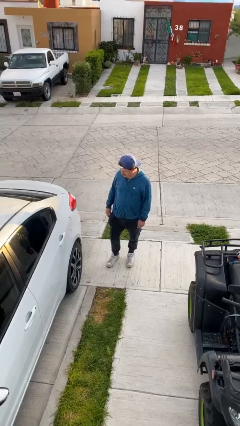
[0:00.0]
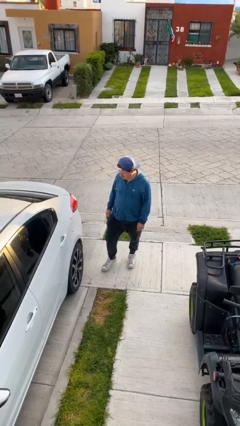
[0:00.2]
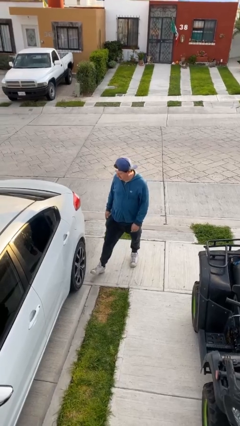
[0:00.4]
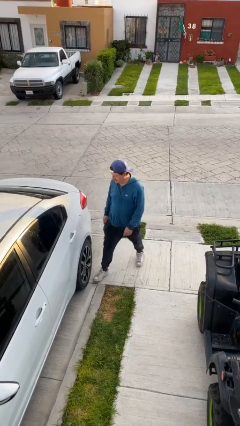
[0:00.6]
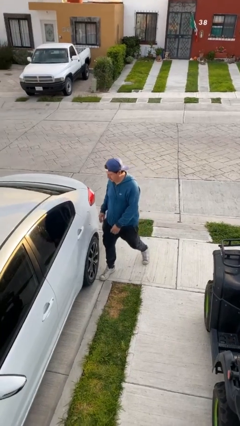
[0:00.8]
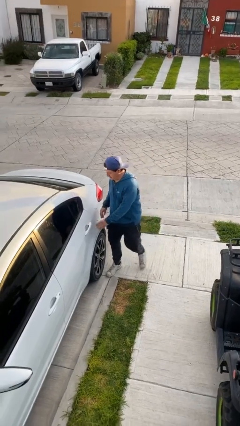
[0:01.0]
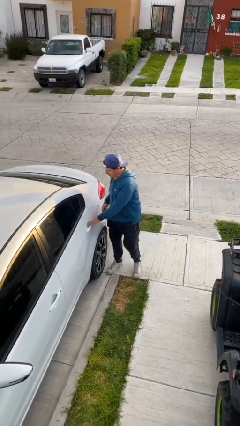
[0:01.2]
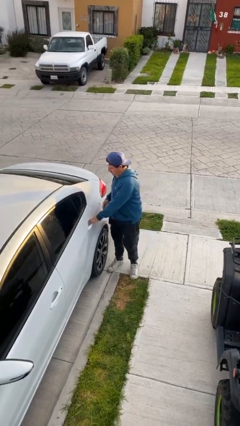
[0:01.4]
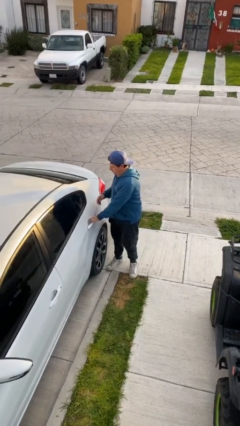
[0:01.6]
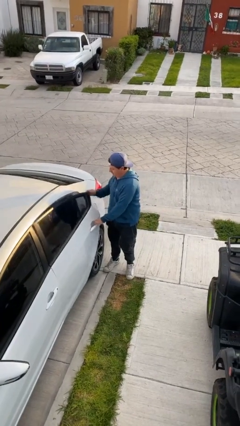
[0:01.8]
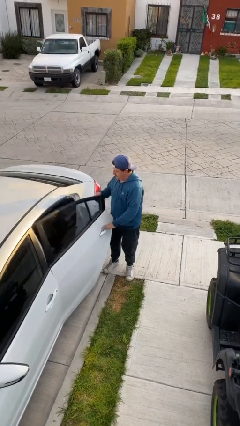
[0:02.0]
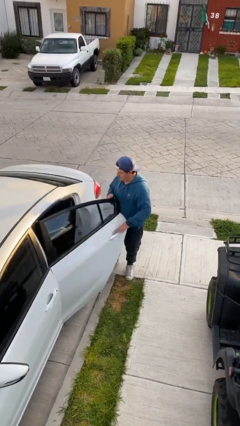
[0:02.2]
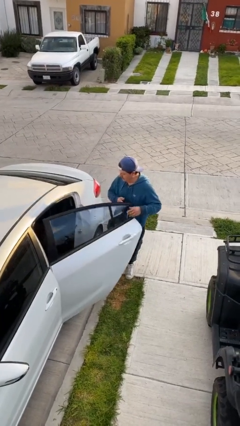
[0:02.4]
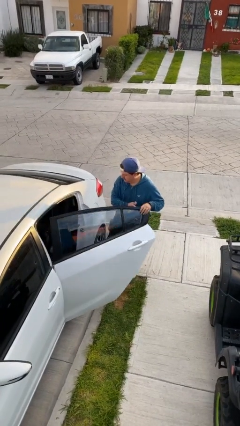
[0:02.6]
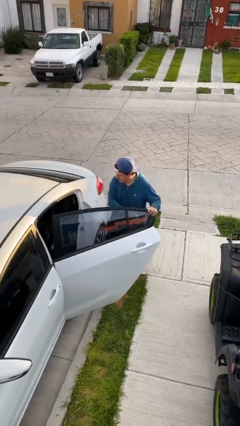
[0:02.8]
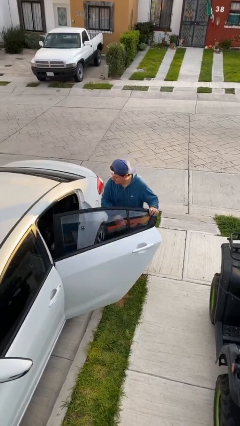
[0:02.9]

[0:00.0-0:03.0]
person opens car door

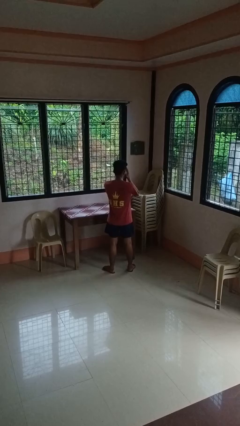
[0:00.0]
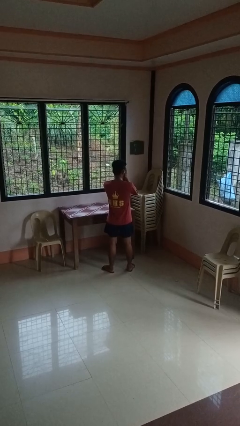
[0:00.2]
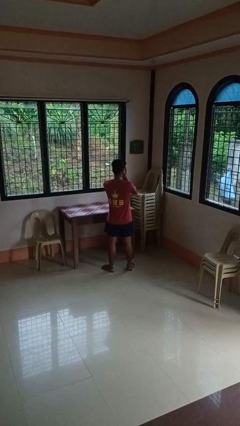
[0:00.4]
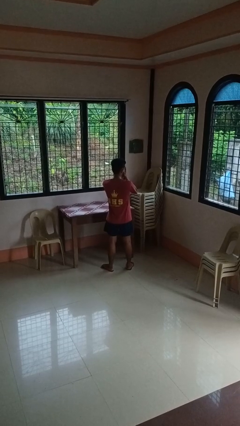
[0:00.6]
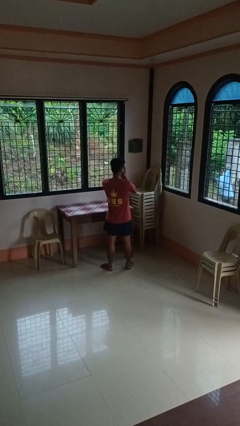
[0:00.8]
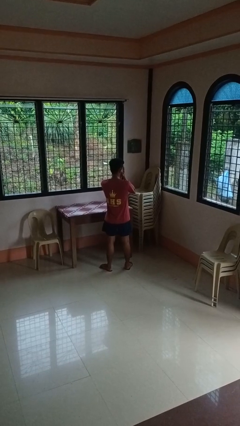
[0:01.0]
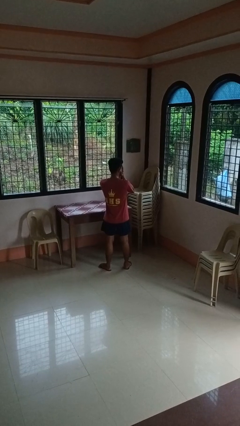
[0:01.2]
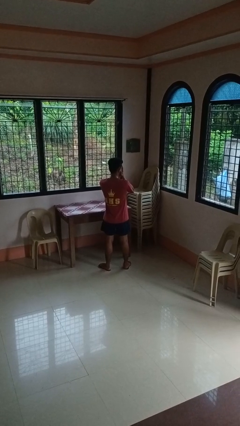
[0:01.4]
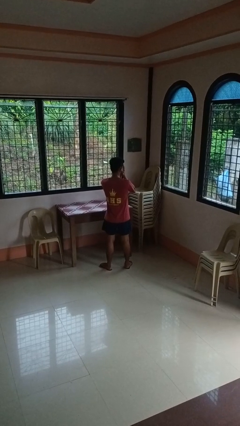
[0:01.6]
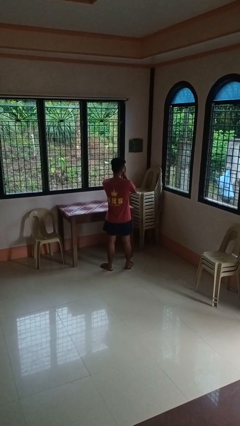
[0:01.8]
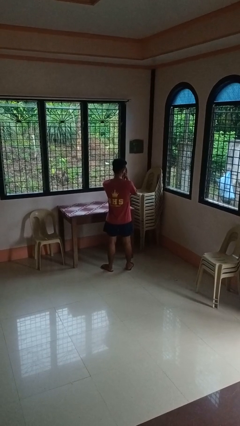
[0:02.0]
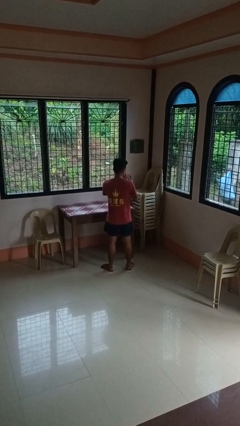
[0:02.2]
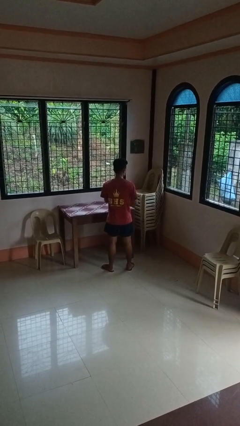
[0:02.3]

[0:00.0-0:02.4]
person covers face with hands

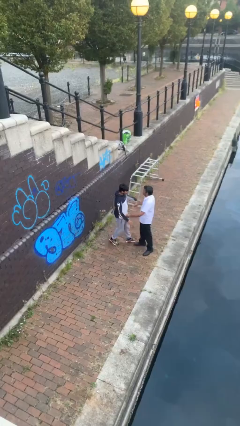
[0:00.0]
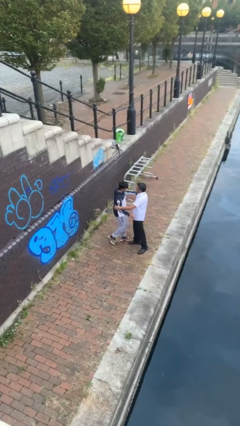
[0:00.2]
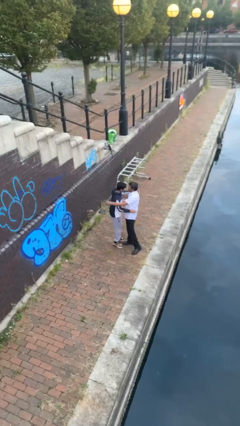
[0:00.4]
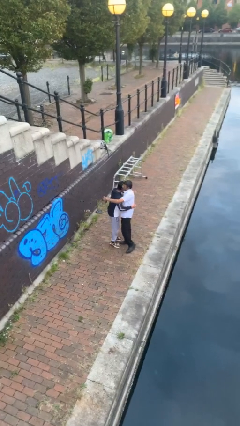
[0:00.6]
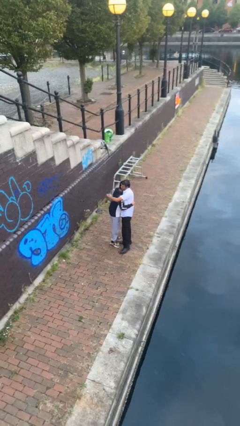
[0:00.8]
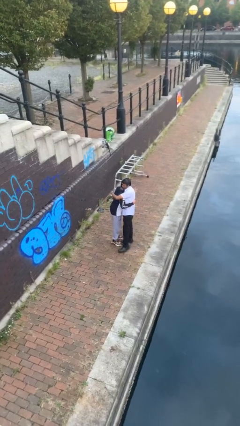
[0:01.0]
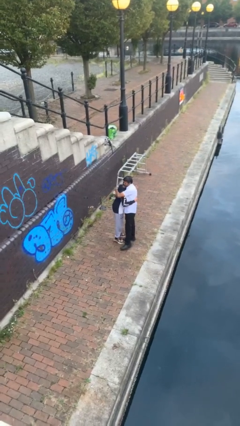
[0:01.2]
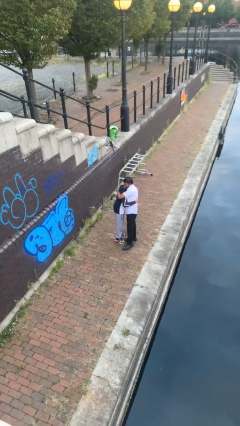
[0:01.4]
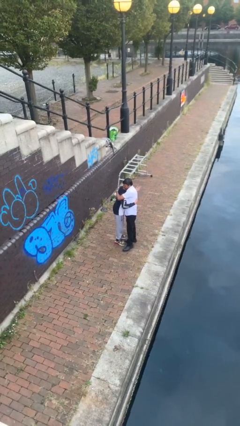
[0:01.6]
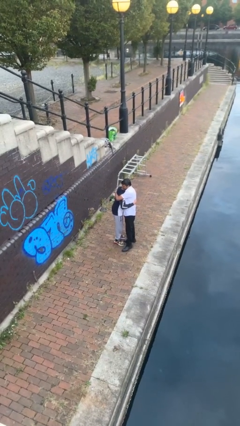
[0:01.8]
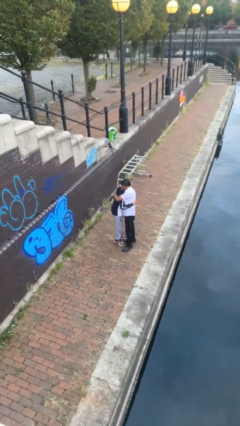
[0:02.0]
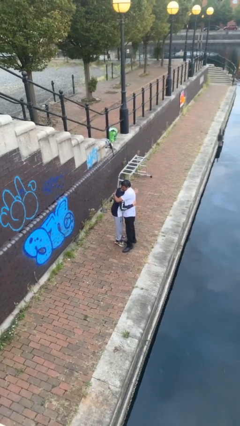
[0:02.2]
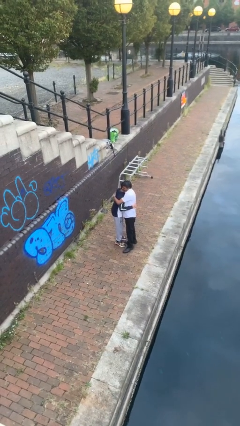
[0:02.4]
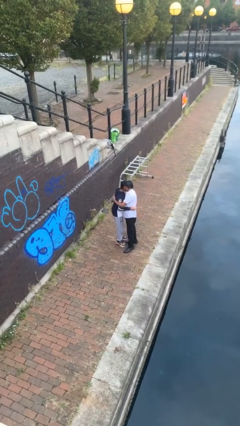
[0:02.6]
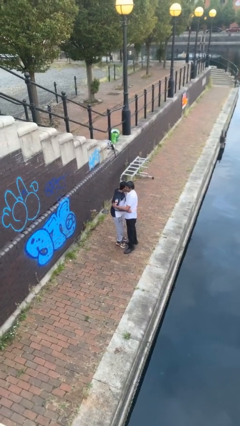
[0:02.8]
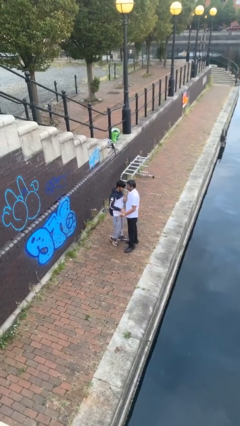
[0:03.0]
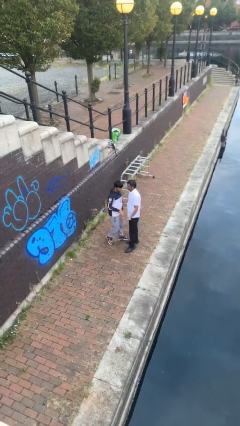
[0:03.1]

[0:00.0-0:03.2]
person embraces person

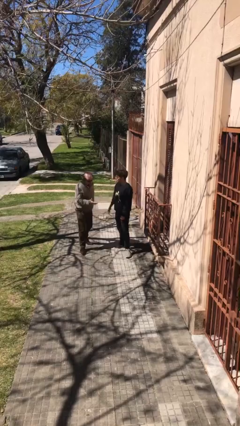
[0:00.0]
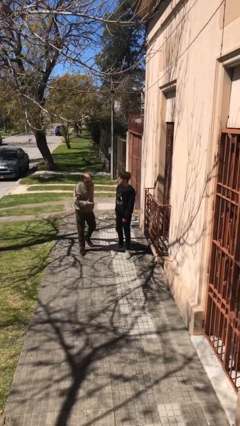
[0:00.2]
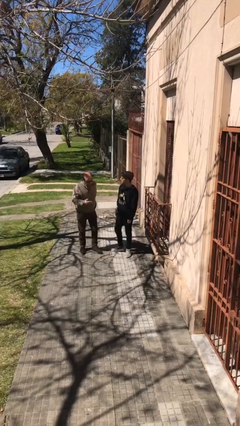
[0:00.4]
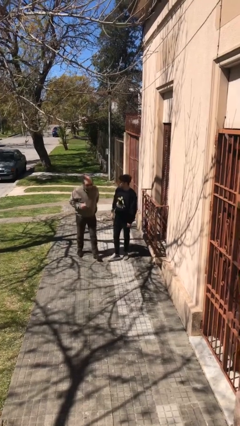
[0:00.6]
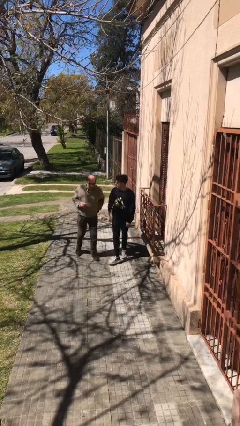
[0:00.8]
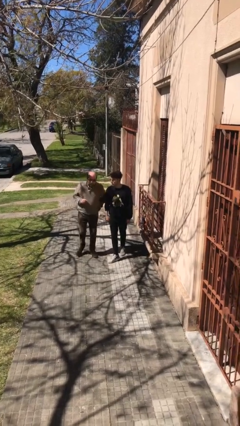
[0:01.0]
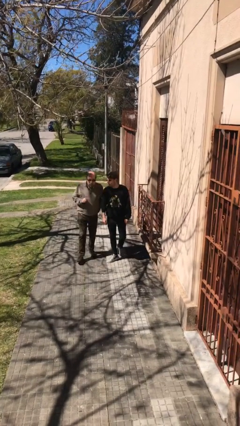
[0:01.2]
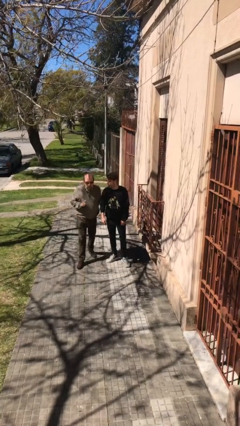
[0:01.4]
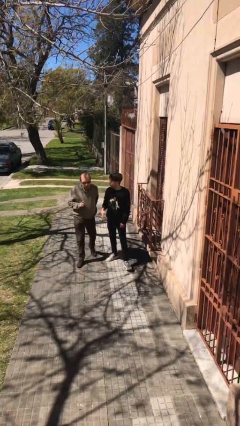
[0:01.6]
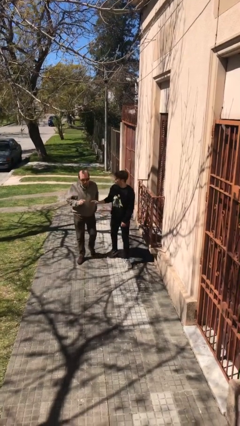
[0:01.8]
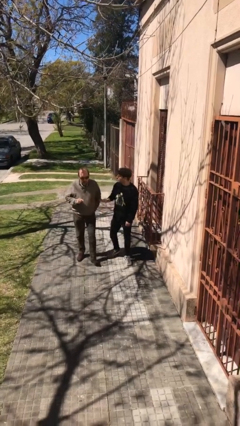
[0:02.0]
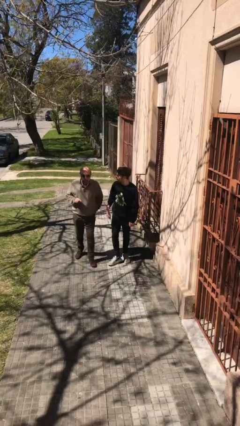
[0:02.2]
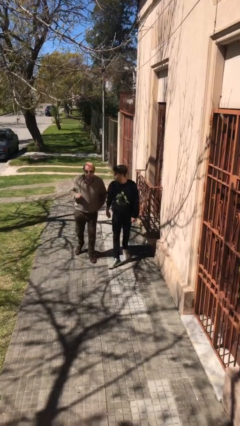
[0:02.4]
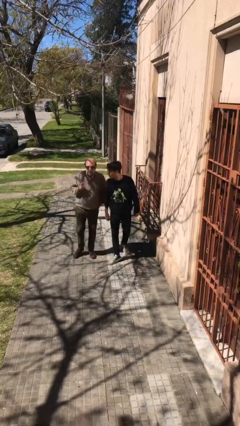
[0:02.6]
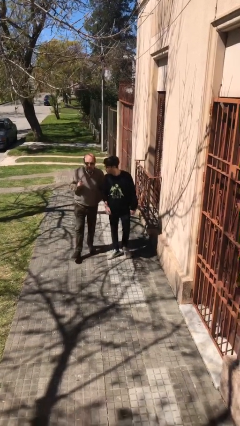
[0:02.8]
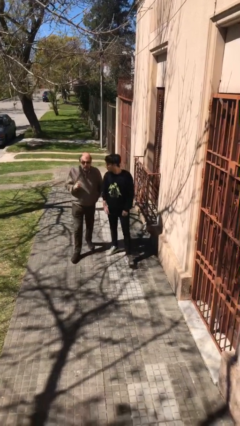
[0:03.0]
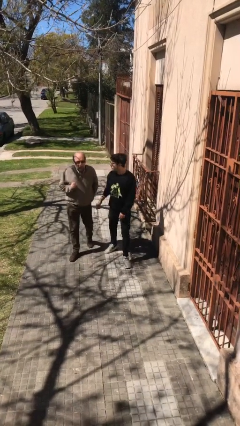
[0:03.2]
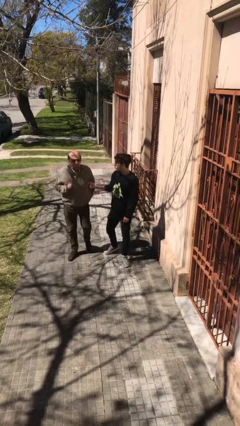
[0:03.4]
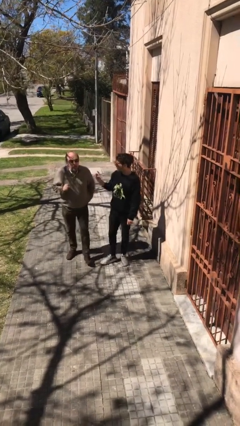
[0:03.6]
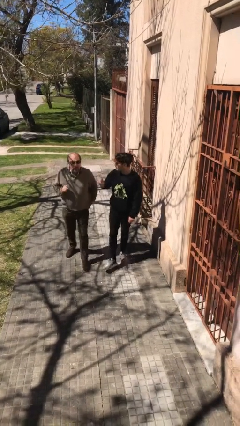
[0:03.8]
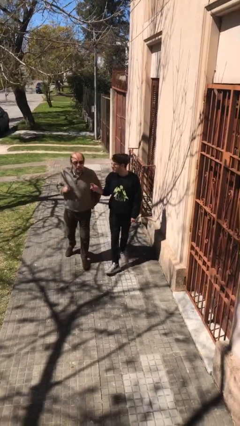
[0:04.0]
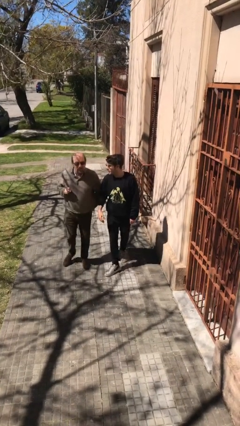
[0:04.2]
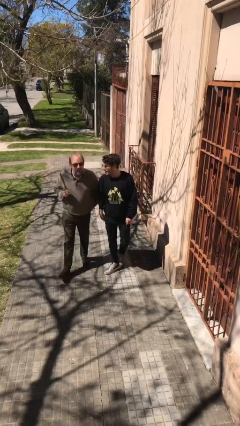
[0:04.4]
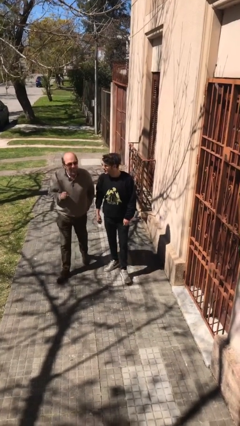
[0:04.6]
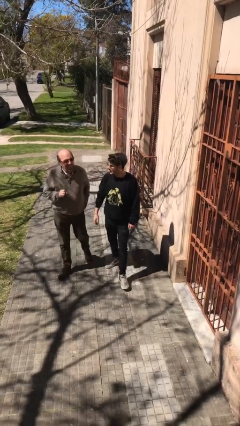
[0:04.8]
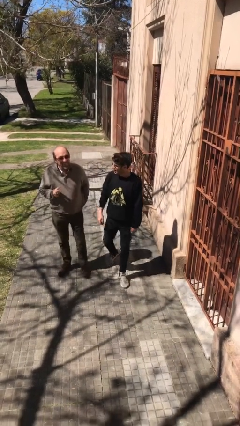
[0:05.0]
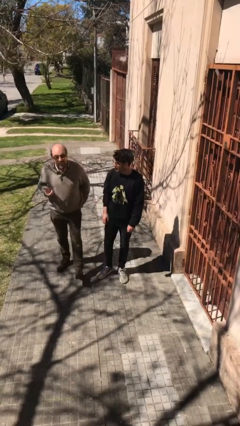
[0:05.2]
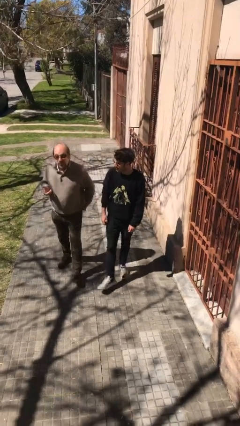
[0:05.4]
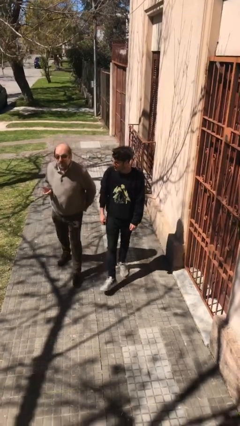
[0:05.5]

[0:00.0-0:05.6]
person talks to person

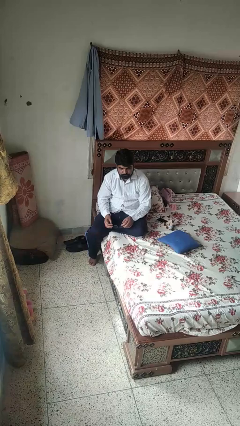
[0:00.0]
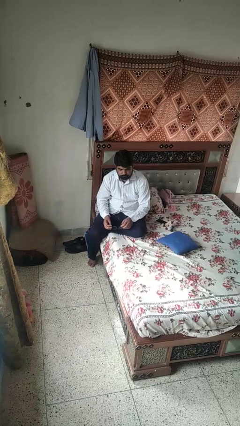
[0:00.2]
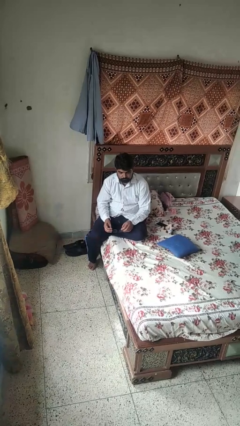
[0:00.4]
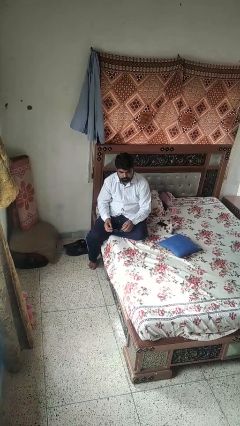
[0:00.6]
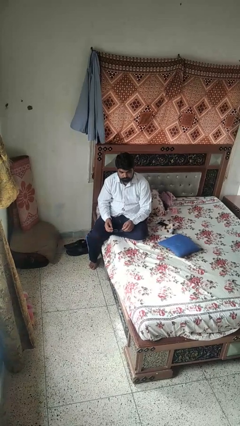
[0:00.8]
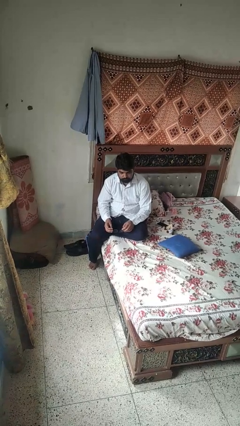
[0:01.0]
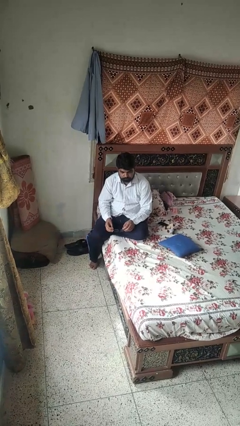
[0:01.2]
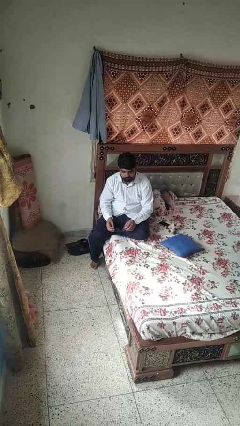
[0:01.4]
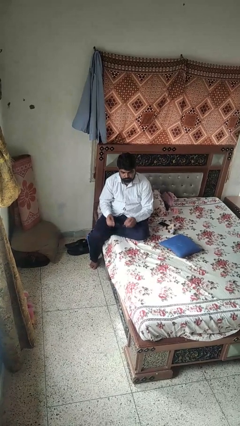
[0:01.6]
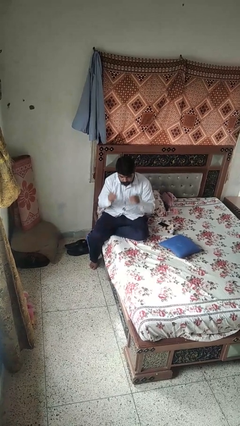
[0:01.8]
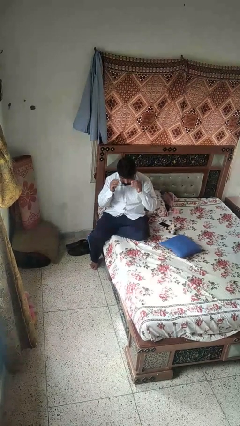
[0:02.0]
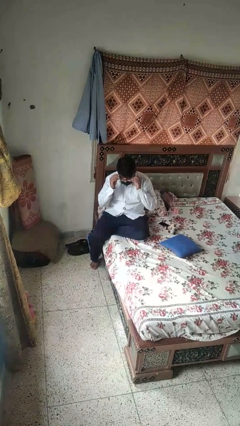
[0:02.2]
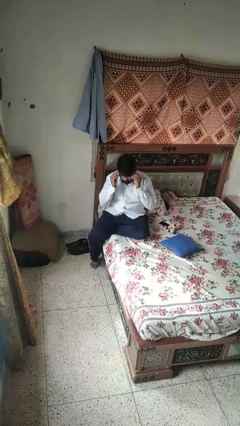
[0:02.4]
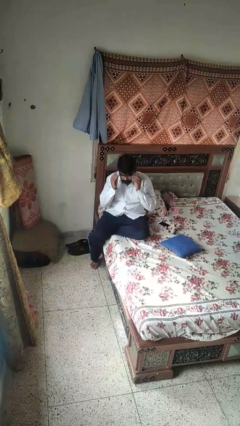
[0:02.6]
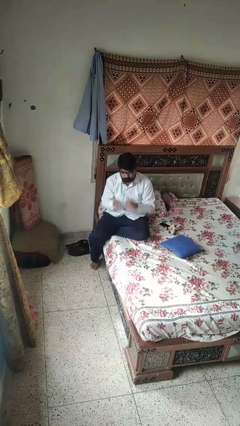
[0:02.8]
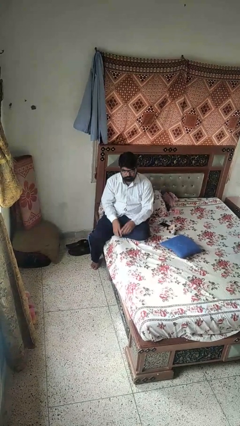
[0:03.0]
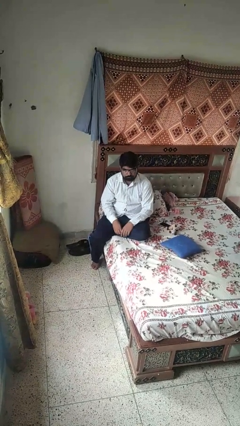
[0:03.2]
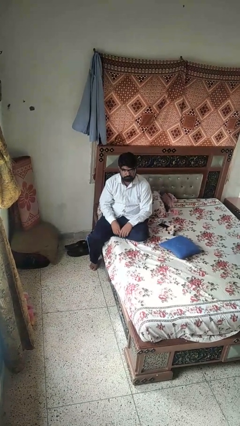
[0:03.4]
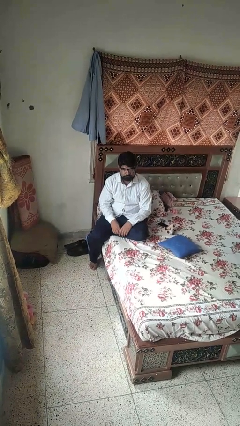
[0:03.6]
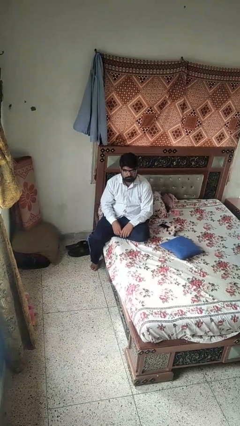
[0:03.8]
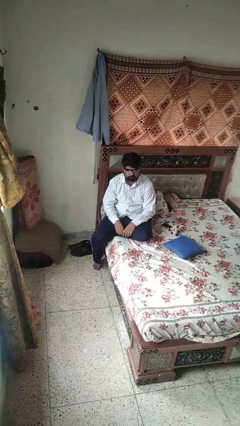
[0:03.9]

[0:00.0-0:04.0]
person puts on glasses
